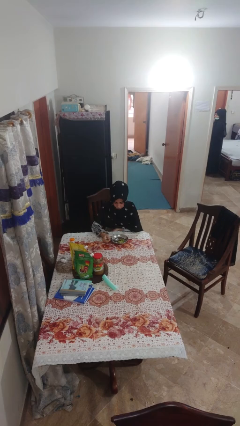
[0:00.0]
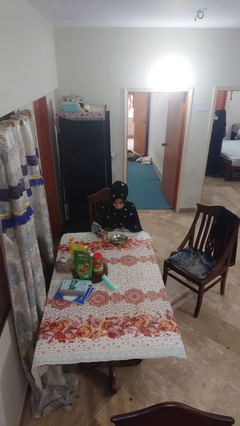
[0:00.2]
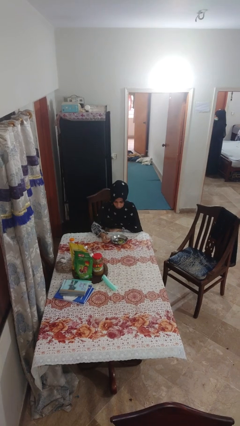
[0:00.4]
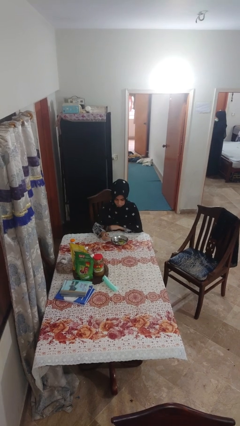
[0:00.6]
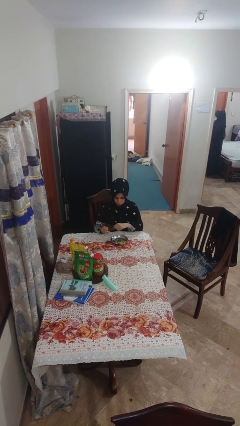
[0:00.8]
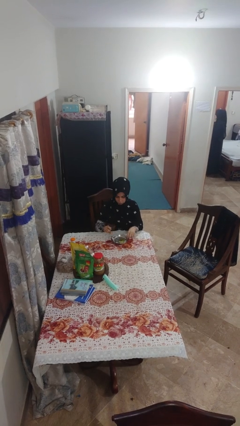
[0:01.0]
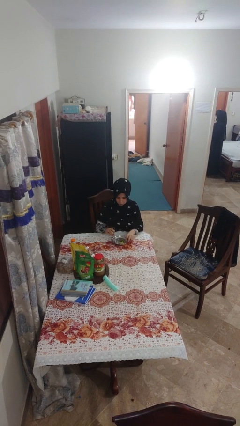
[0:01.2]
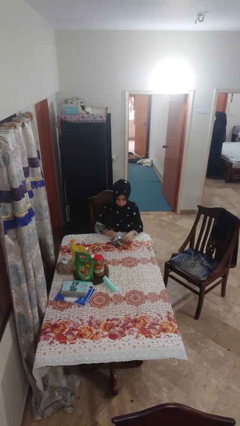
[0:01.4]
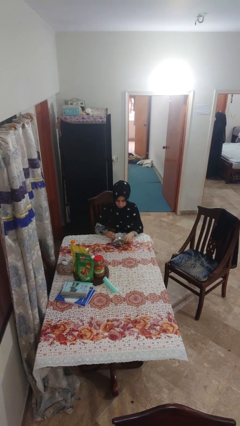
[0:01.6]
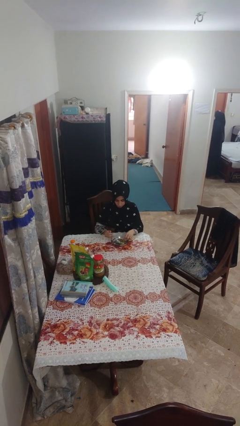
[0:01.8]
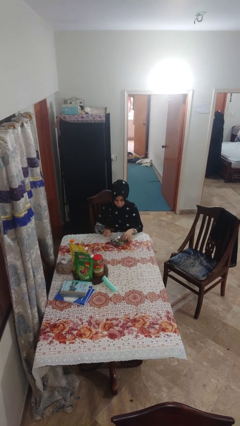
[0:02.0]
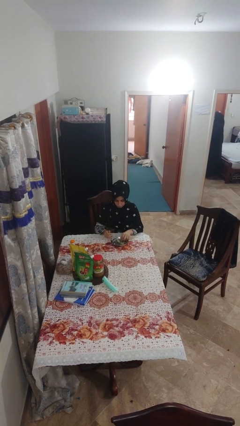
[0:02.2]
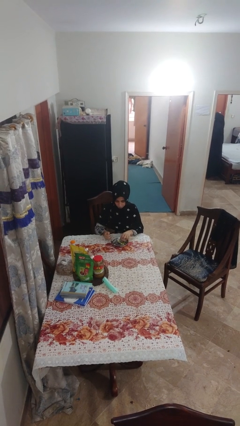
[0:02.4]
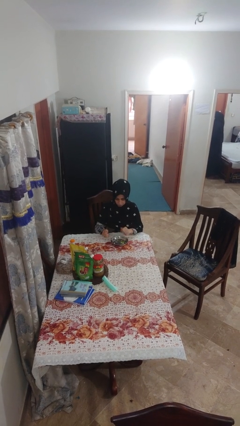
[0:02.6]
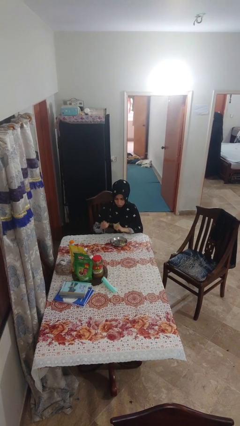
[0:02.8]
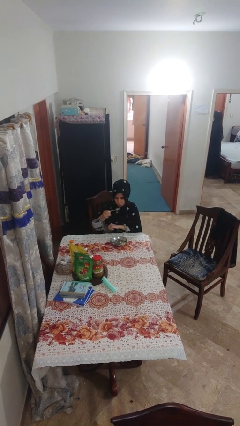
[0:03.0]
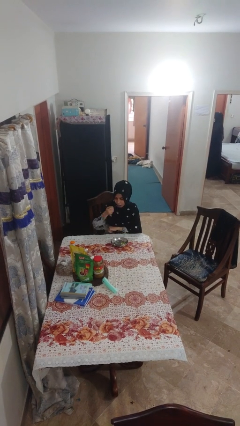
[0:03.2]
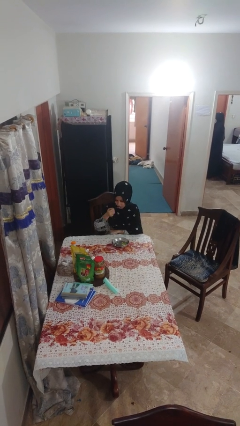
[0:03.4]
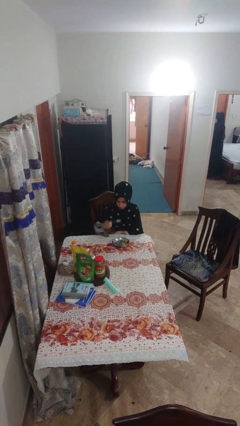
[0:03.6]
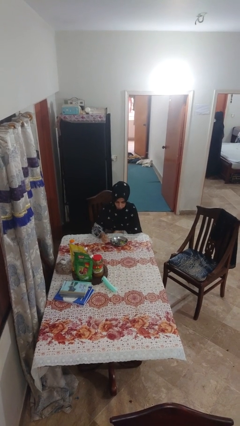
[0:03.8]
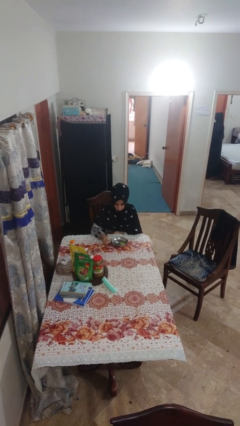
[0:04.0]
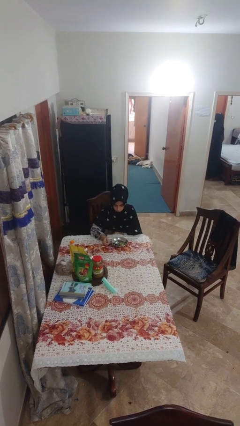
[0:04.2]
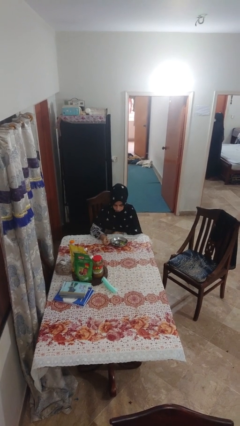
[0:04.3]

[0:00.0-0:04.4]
person eats with utensil

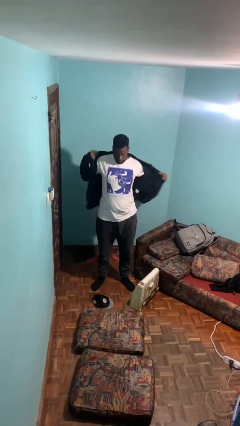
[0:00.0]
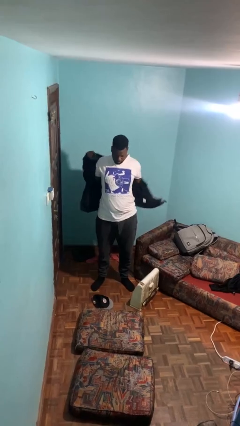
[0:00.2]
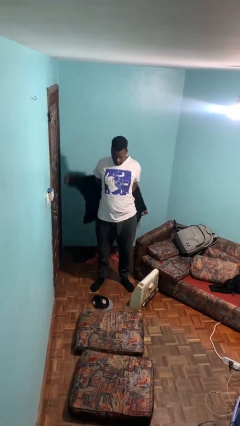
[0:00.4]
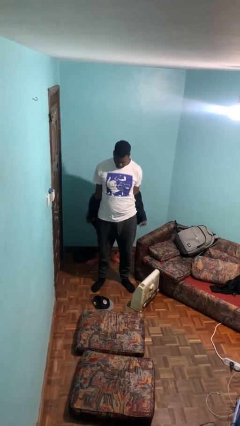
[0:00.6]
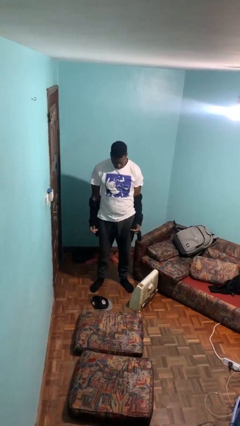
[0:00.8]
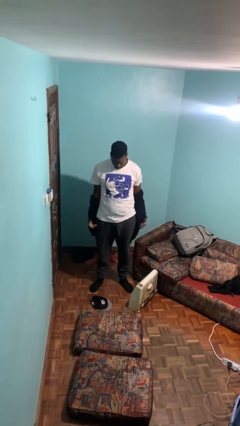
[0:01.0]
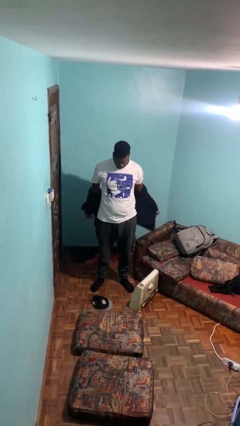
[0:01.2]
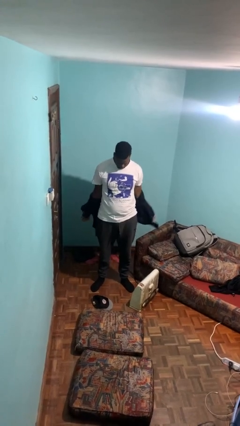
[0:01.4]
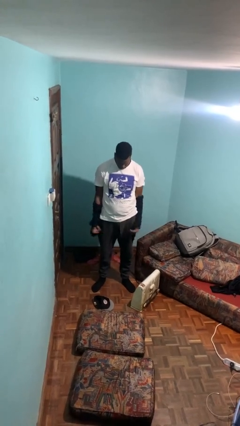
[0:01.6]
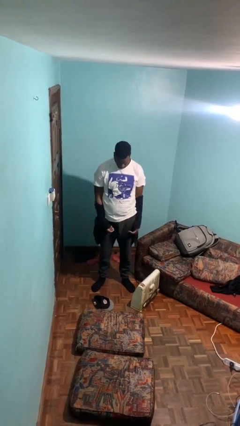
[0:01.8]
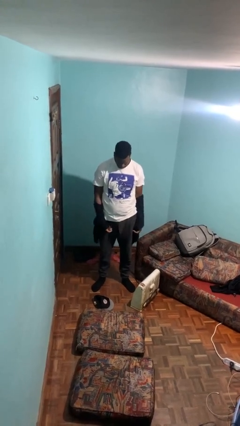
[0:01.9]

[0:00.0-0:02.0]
person takes off jacket

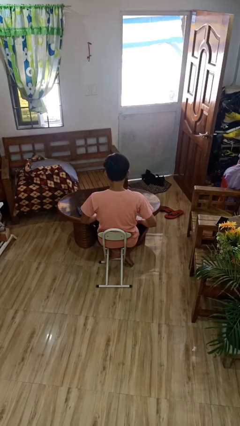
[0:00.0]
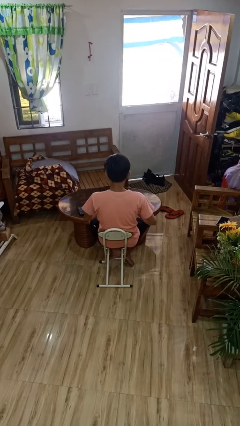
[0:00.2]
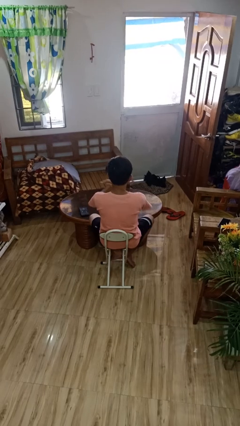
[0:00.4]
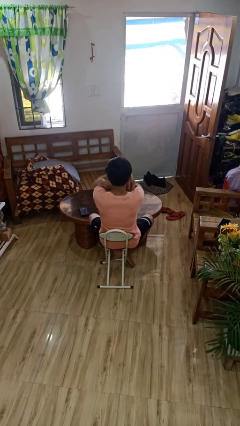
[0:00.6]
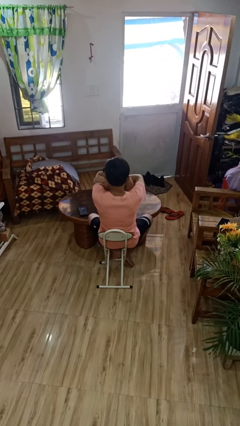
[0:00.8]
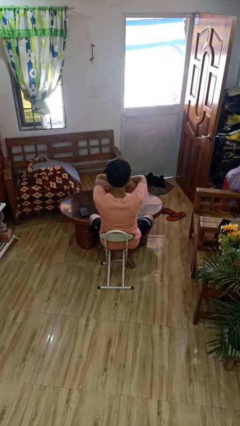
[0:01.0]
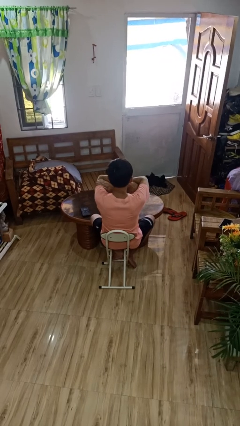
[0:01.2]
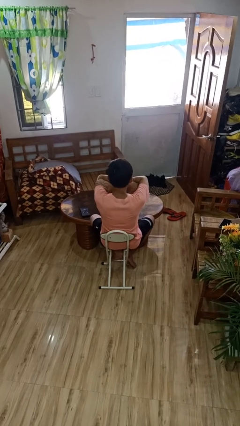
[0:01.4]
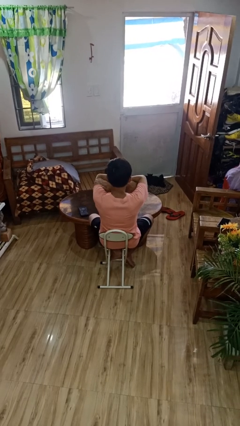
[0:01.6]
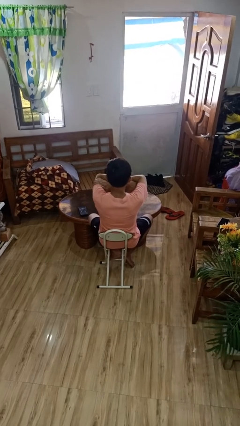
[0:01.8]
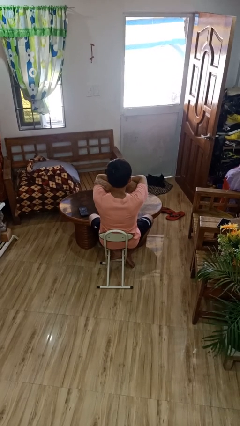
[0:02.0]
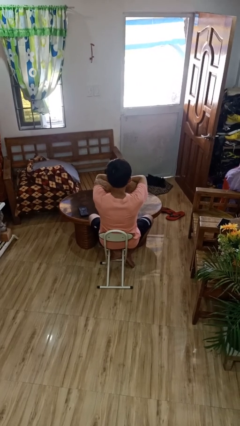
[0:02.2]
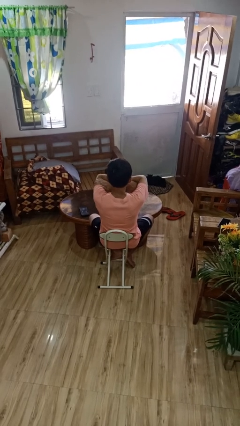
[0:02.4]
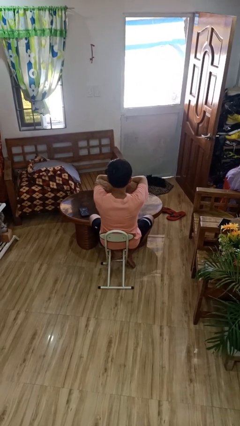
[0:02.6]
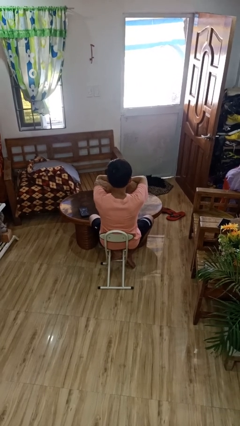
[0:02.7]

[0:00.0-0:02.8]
person crosses arms

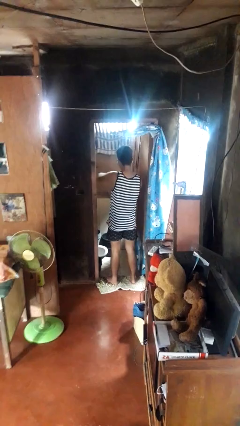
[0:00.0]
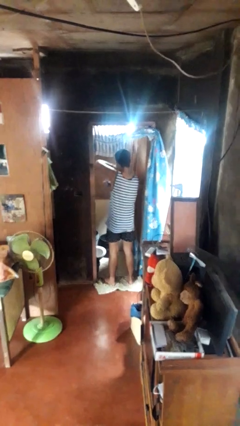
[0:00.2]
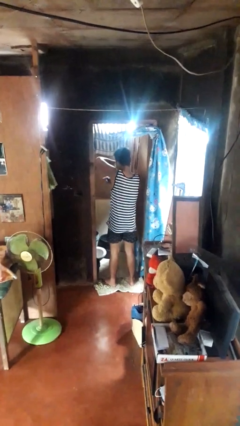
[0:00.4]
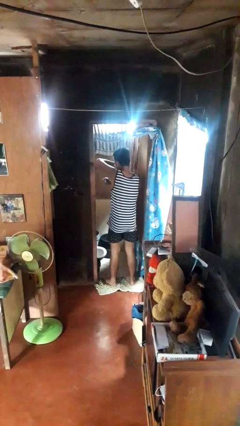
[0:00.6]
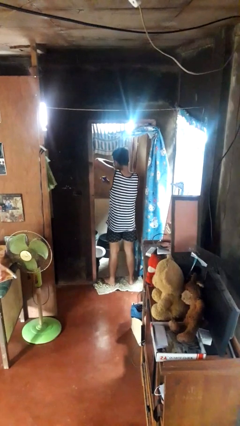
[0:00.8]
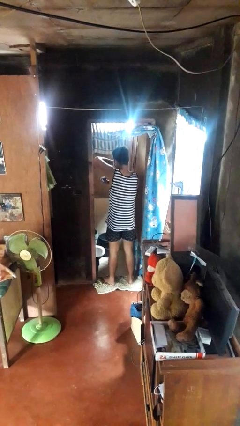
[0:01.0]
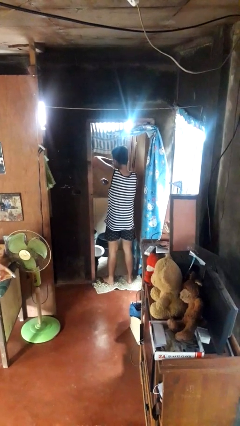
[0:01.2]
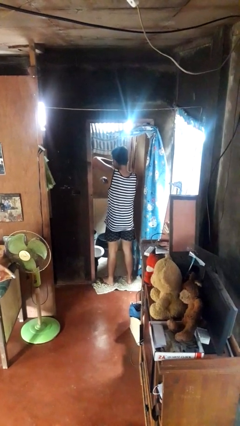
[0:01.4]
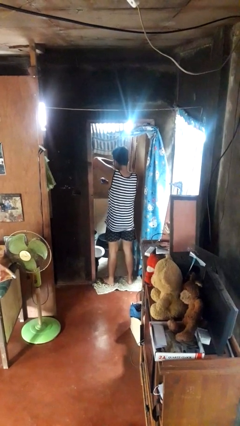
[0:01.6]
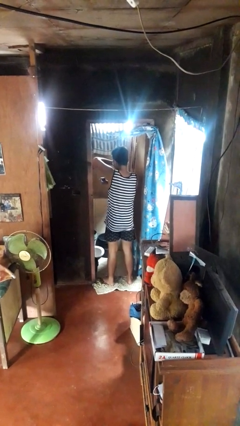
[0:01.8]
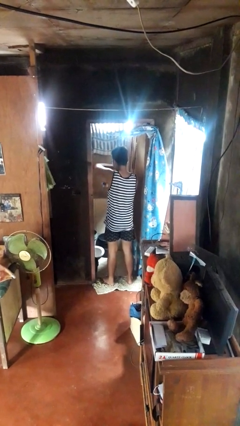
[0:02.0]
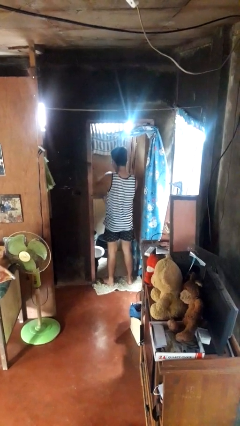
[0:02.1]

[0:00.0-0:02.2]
person applies deodorant

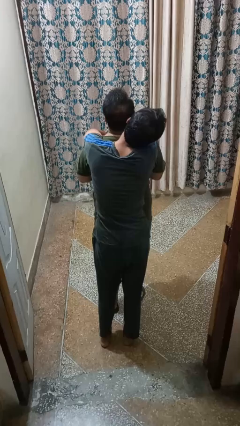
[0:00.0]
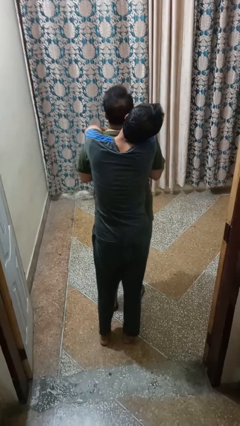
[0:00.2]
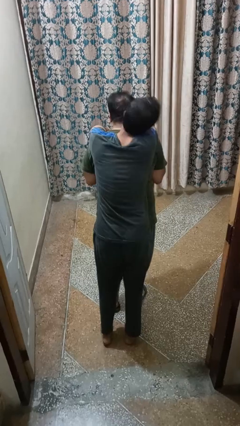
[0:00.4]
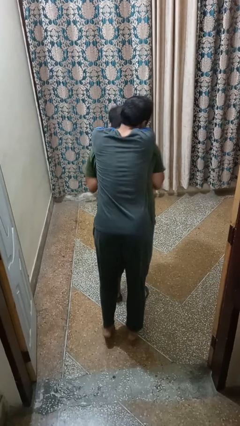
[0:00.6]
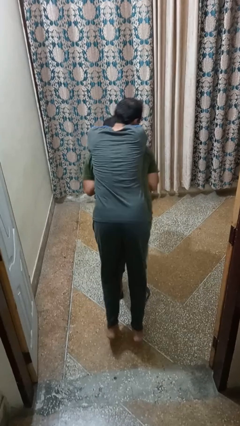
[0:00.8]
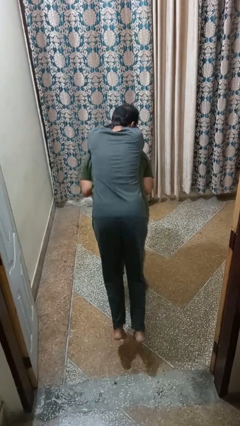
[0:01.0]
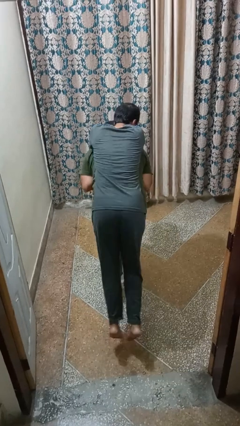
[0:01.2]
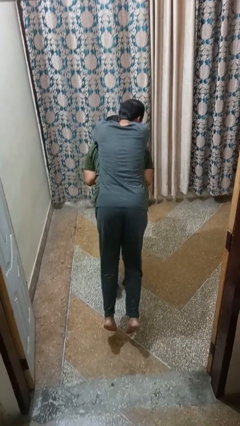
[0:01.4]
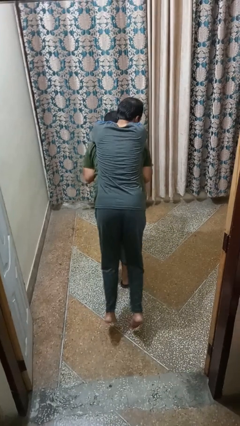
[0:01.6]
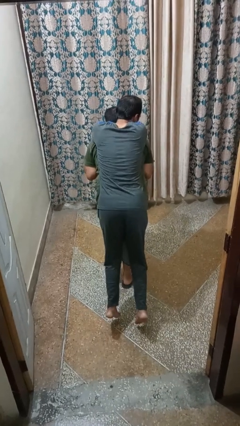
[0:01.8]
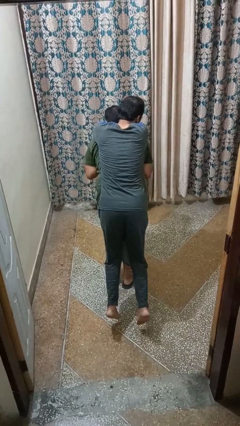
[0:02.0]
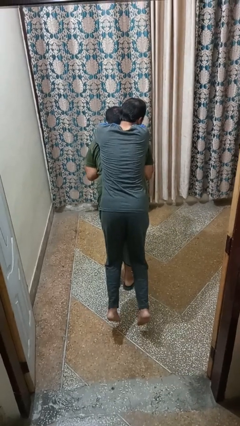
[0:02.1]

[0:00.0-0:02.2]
person carries person on back

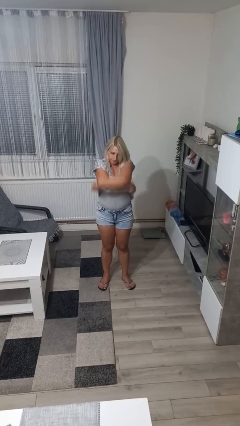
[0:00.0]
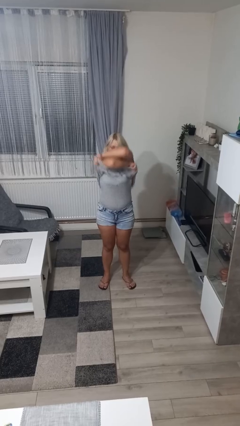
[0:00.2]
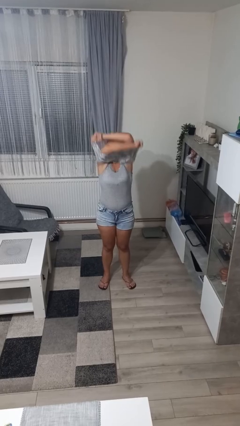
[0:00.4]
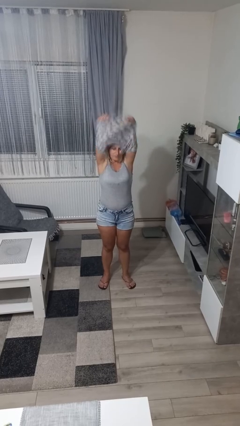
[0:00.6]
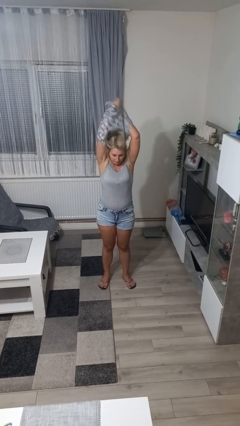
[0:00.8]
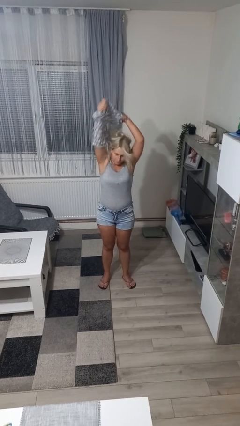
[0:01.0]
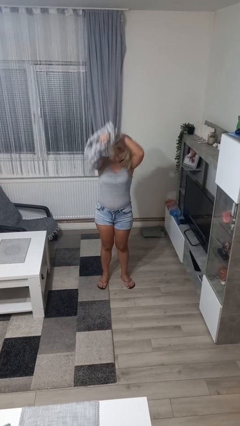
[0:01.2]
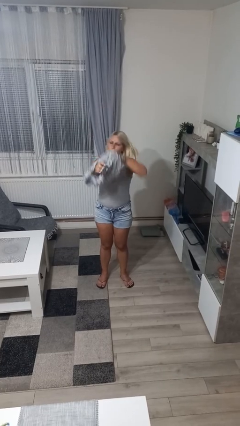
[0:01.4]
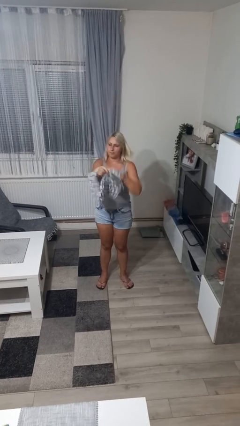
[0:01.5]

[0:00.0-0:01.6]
person takes off shirt

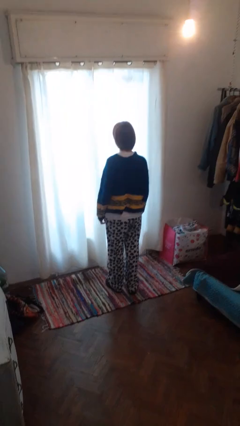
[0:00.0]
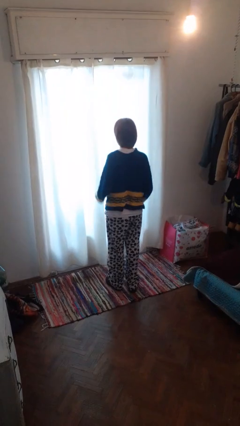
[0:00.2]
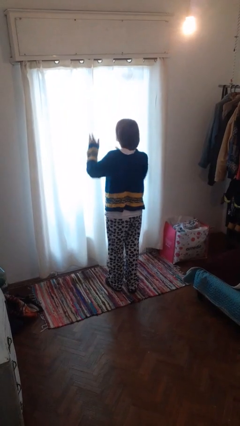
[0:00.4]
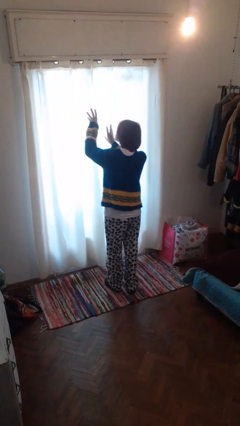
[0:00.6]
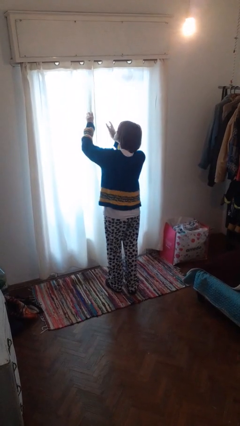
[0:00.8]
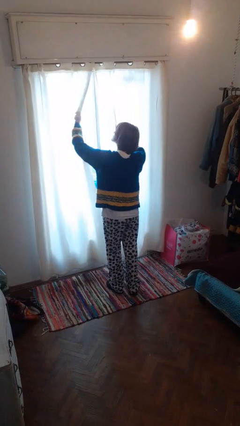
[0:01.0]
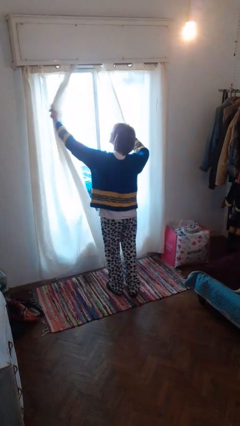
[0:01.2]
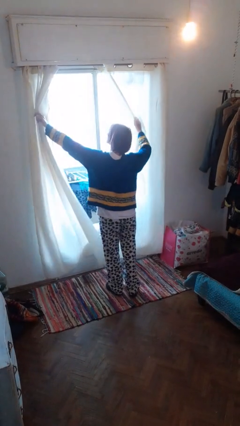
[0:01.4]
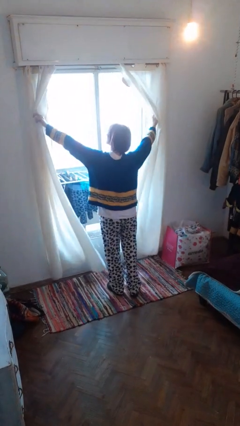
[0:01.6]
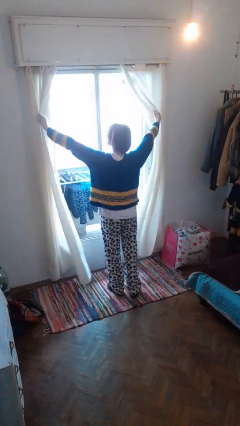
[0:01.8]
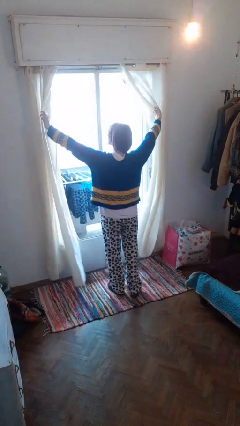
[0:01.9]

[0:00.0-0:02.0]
person opens curtains
